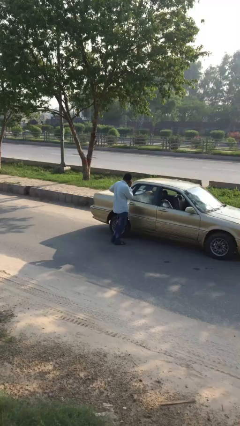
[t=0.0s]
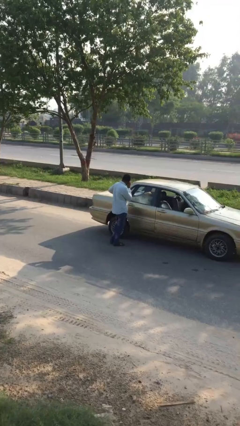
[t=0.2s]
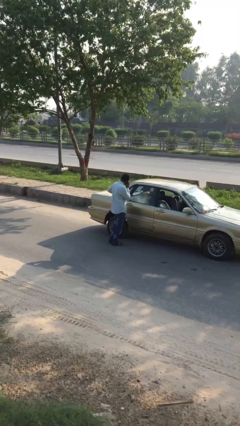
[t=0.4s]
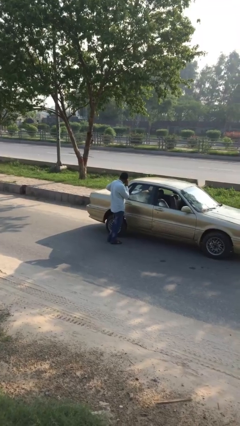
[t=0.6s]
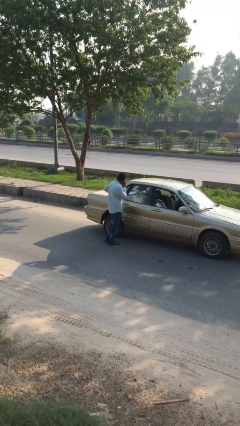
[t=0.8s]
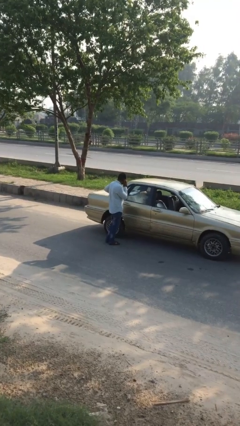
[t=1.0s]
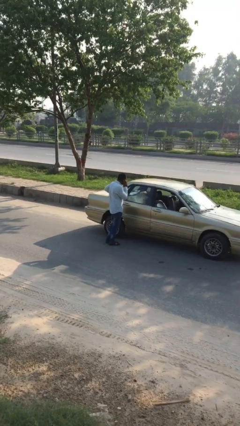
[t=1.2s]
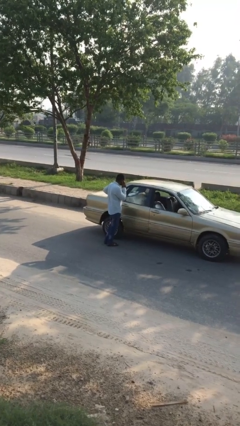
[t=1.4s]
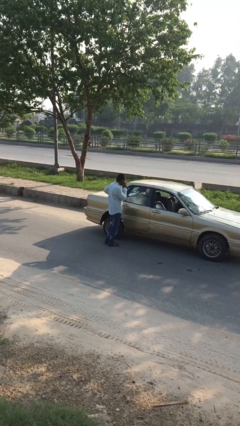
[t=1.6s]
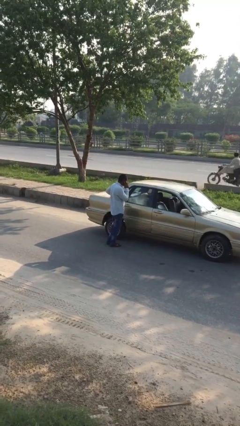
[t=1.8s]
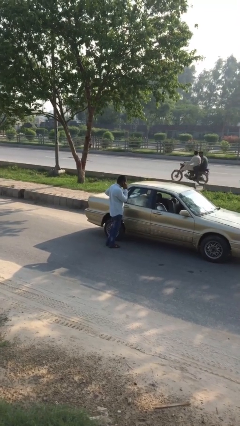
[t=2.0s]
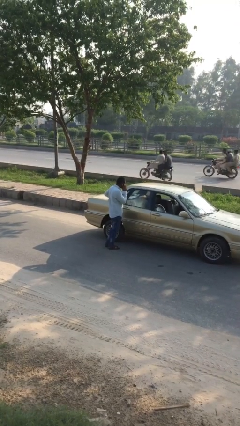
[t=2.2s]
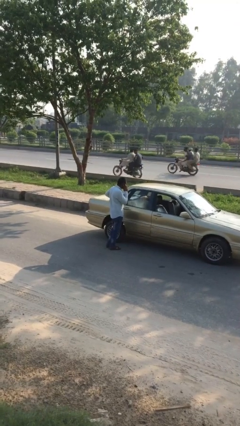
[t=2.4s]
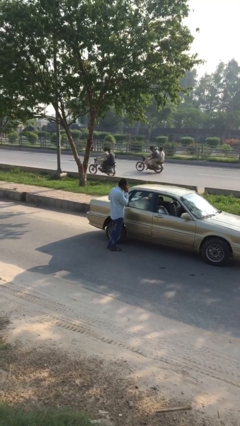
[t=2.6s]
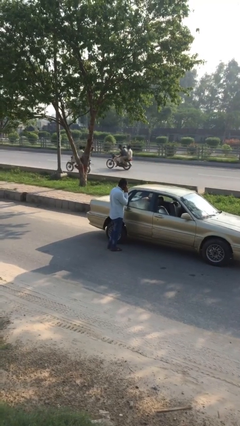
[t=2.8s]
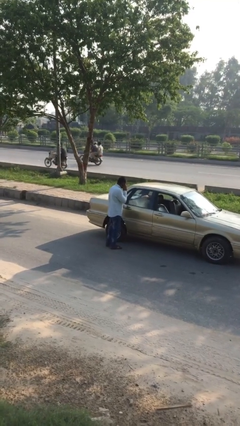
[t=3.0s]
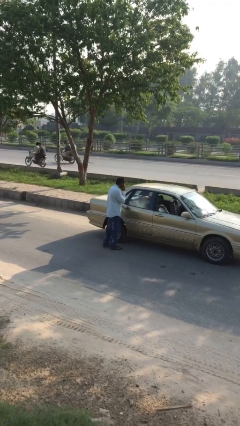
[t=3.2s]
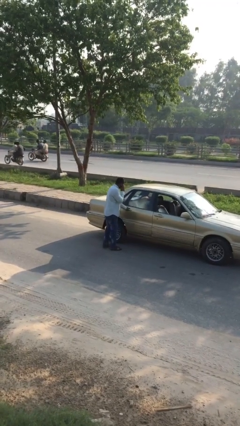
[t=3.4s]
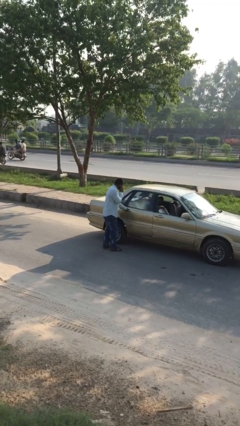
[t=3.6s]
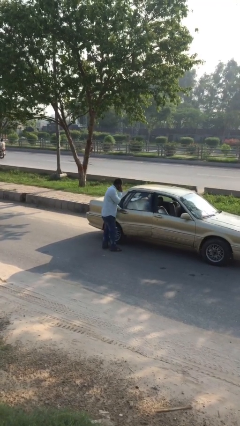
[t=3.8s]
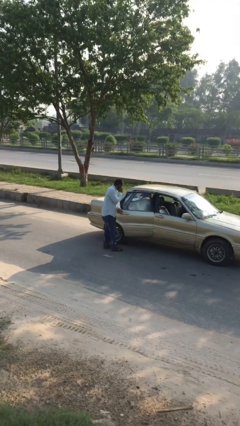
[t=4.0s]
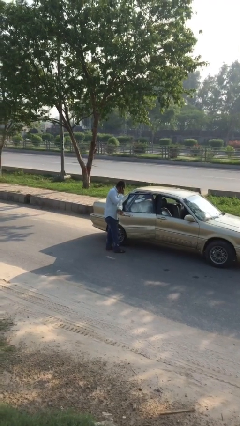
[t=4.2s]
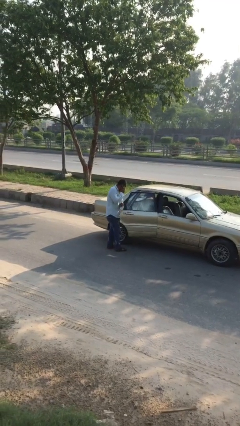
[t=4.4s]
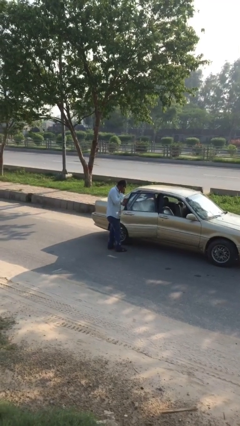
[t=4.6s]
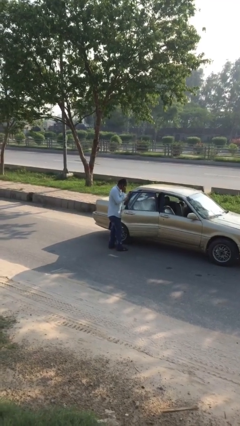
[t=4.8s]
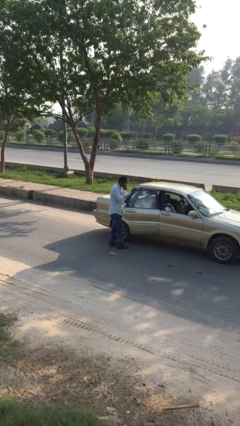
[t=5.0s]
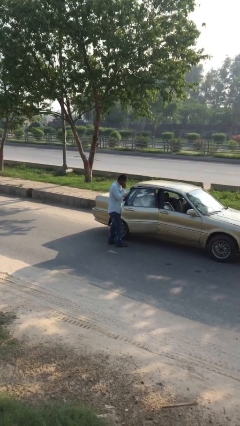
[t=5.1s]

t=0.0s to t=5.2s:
person opens car door

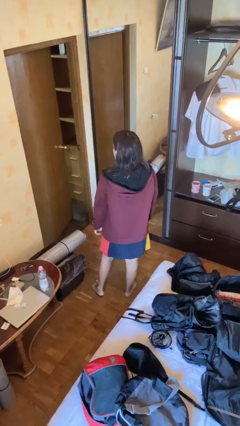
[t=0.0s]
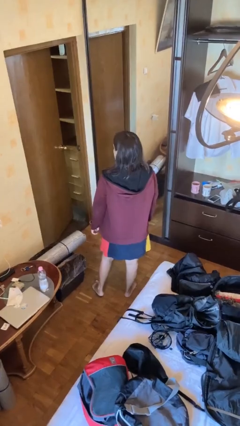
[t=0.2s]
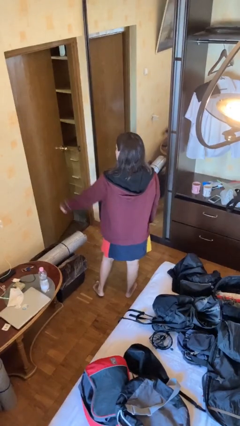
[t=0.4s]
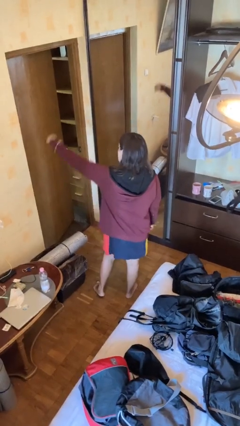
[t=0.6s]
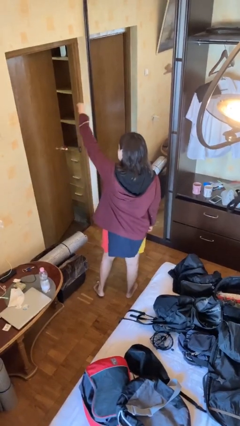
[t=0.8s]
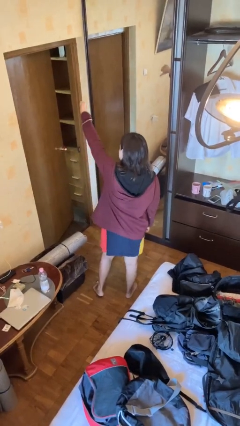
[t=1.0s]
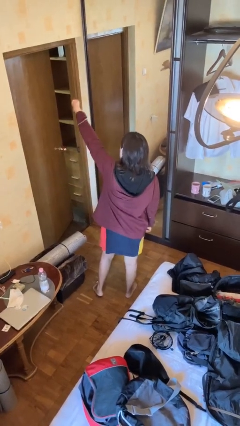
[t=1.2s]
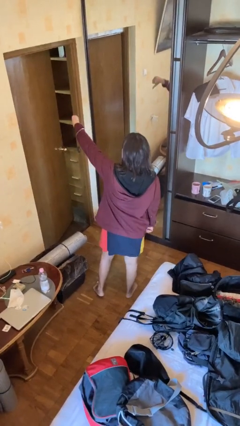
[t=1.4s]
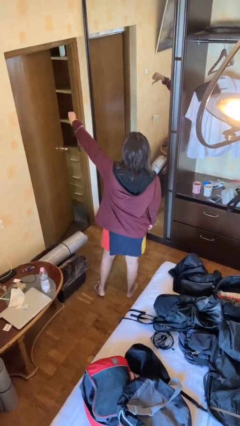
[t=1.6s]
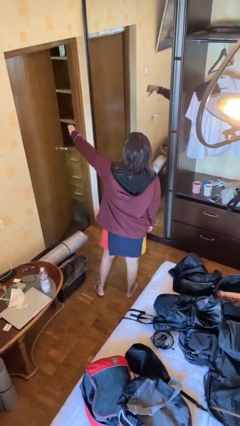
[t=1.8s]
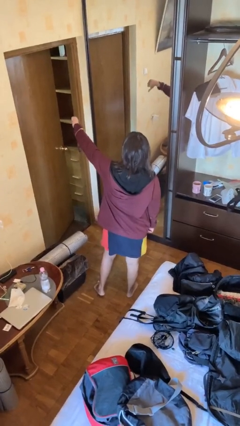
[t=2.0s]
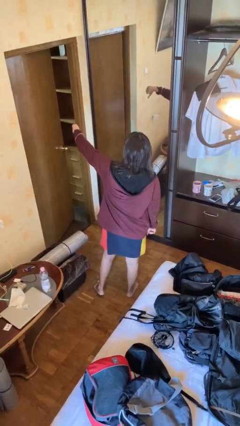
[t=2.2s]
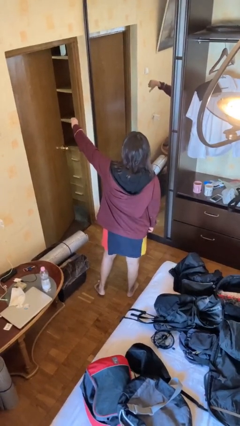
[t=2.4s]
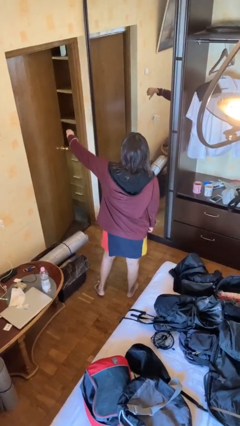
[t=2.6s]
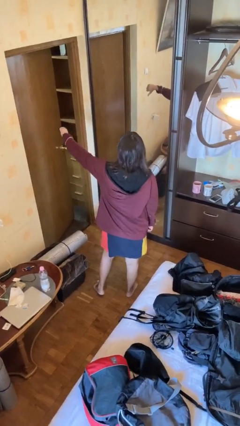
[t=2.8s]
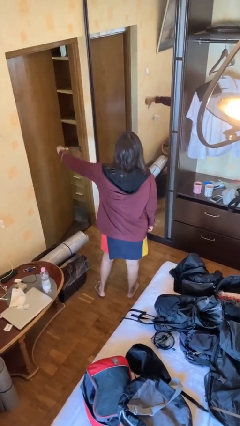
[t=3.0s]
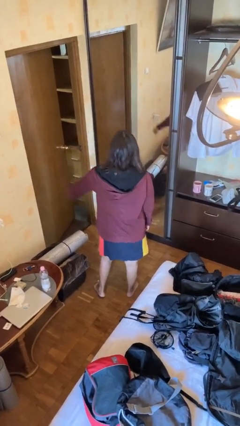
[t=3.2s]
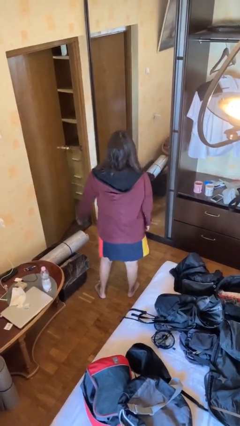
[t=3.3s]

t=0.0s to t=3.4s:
person gestures thumbs down

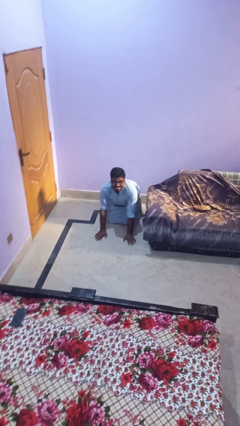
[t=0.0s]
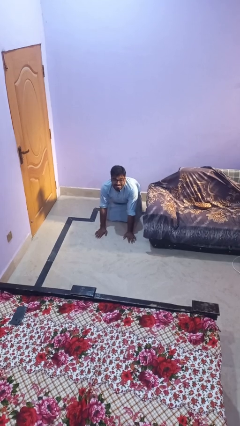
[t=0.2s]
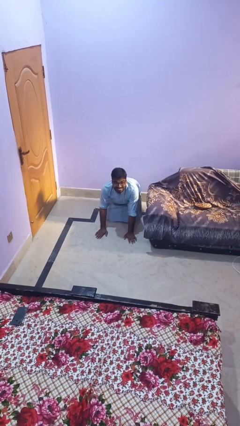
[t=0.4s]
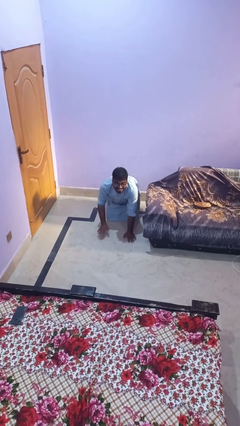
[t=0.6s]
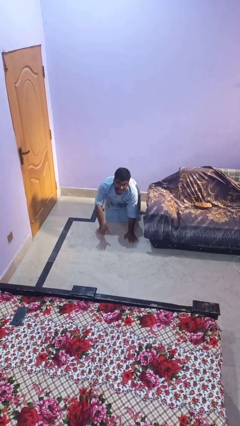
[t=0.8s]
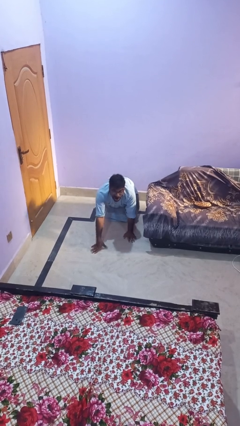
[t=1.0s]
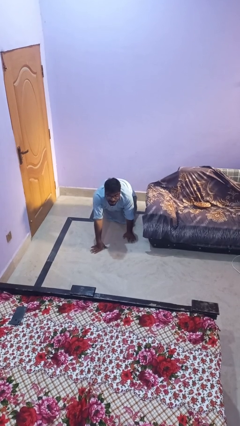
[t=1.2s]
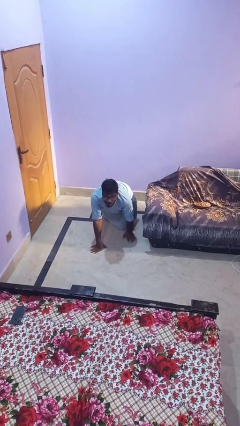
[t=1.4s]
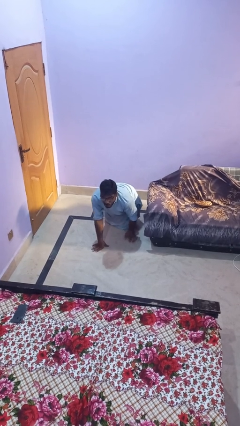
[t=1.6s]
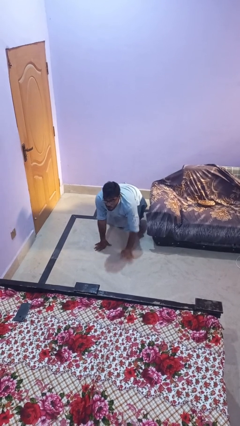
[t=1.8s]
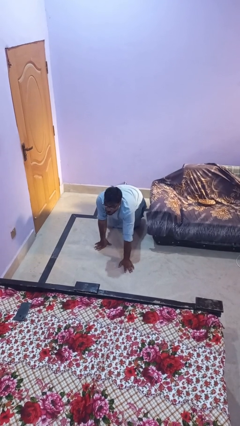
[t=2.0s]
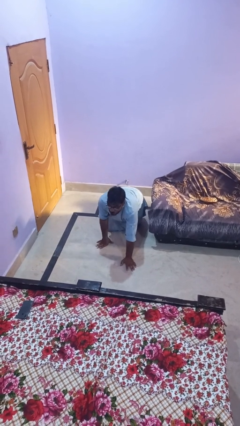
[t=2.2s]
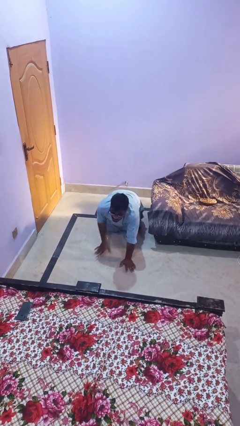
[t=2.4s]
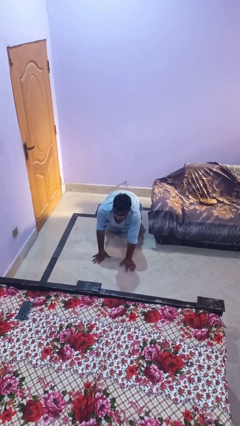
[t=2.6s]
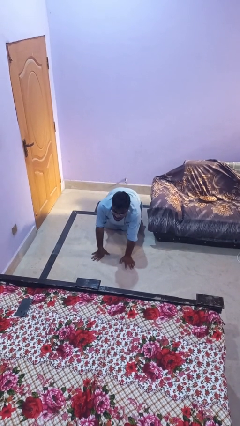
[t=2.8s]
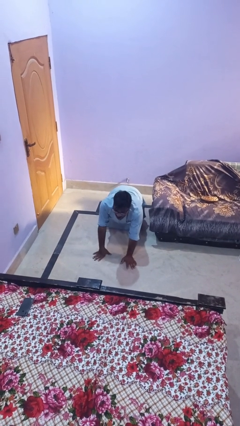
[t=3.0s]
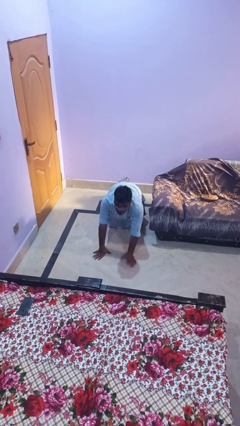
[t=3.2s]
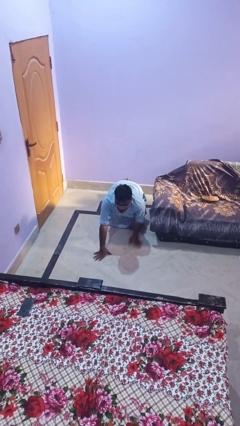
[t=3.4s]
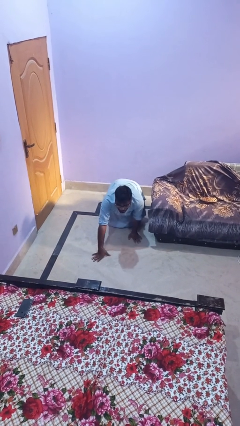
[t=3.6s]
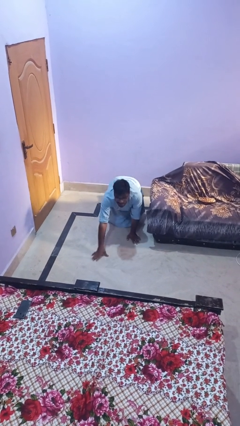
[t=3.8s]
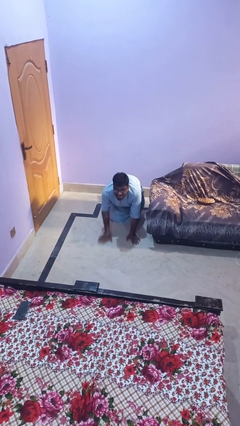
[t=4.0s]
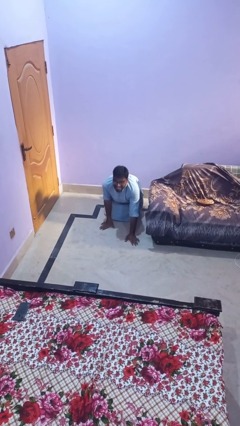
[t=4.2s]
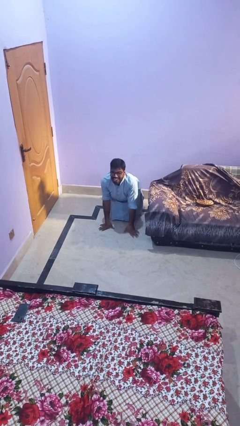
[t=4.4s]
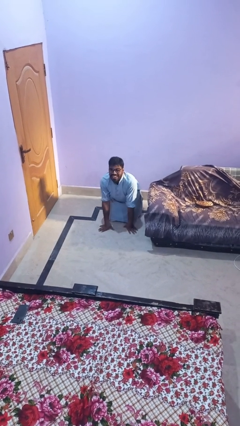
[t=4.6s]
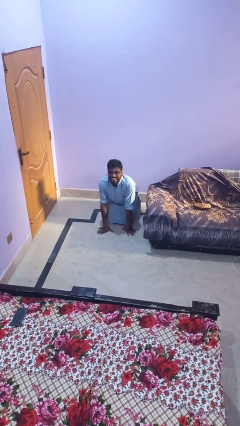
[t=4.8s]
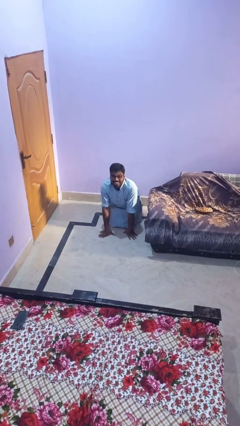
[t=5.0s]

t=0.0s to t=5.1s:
person crawls

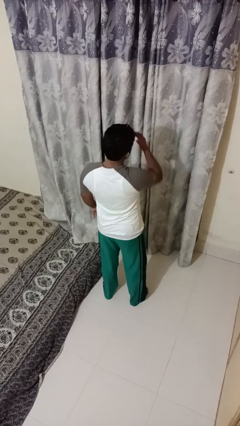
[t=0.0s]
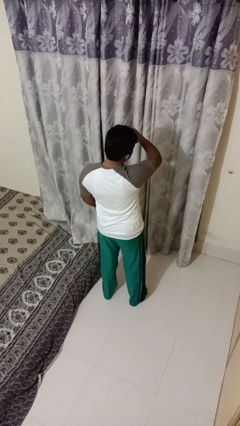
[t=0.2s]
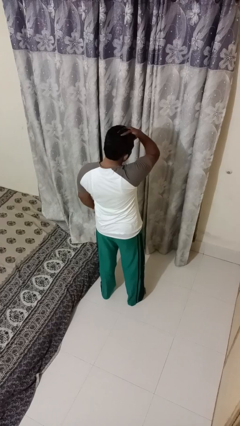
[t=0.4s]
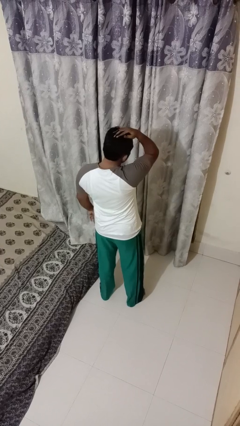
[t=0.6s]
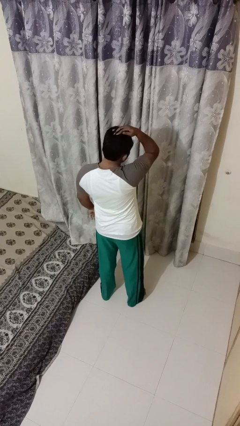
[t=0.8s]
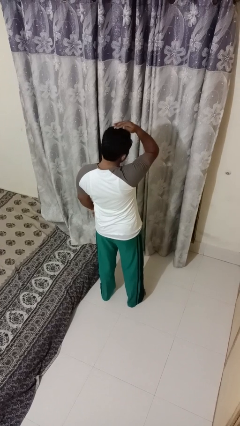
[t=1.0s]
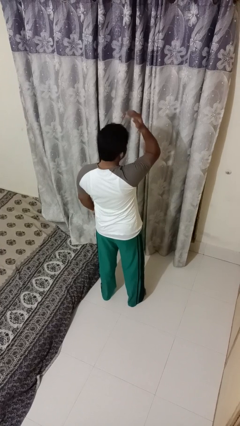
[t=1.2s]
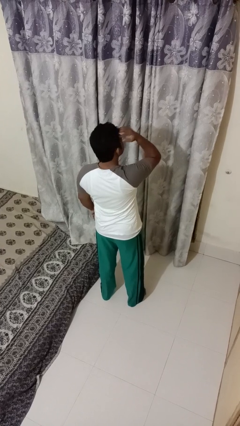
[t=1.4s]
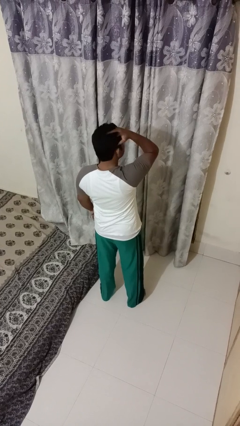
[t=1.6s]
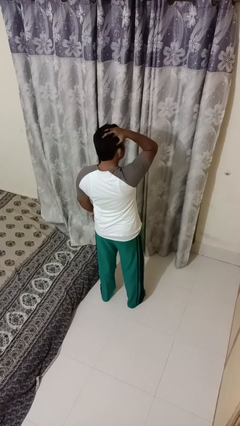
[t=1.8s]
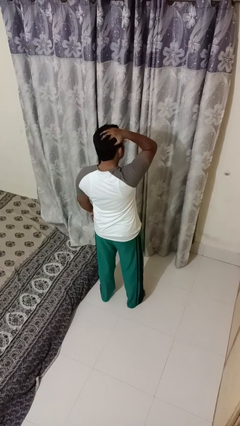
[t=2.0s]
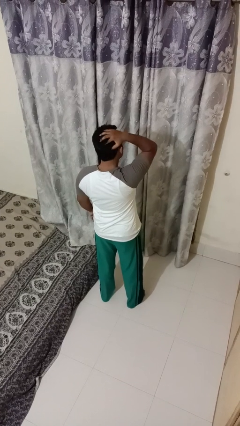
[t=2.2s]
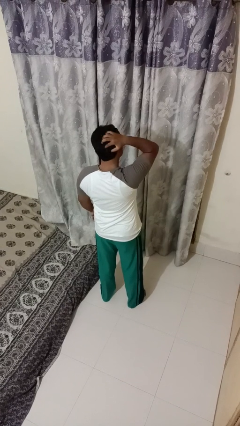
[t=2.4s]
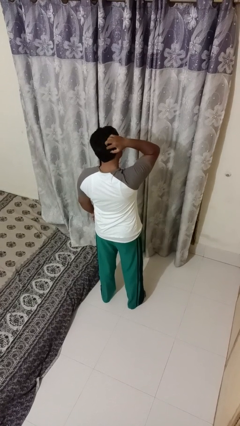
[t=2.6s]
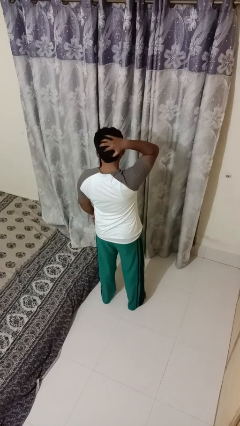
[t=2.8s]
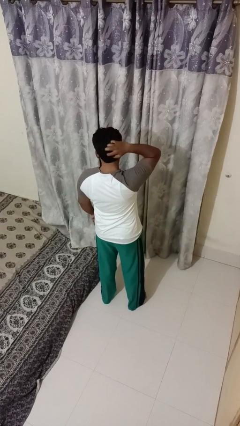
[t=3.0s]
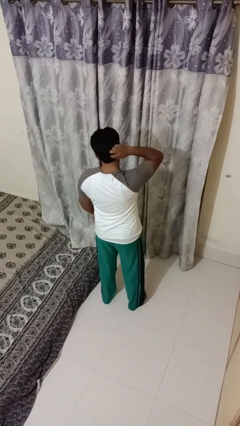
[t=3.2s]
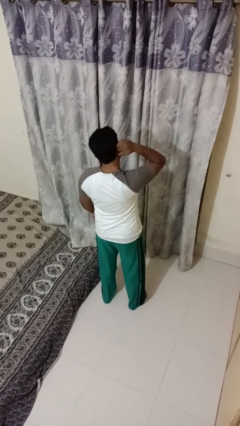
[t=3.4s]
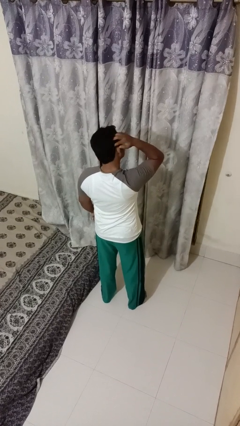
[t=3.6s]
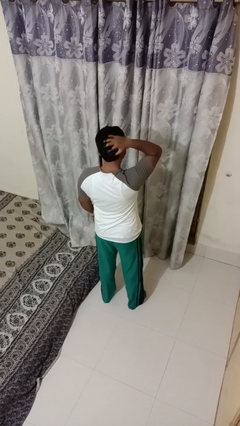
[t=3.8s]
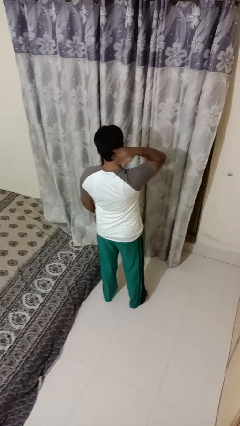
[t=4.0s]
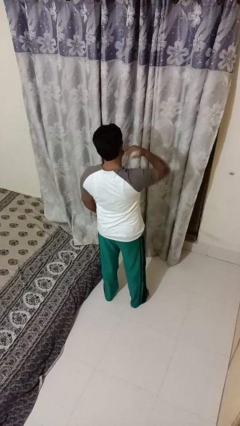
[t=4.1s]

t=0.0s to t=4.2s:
person strokes hair

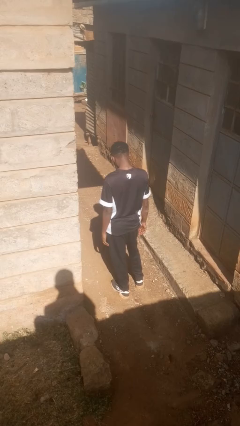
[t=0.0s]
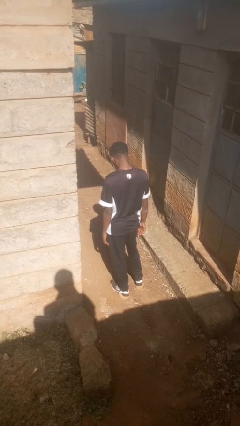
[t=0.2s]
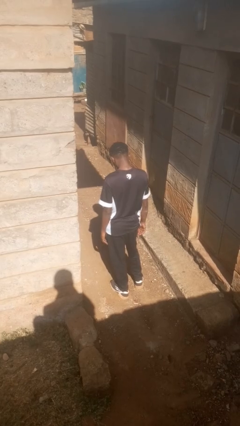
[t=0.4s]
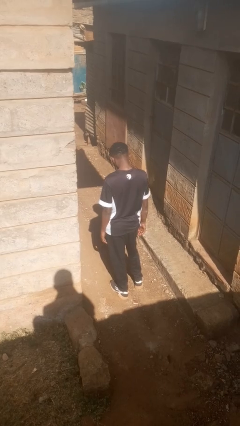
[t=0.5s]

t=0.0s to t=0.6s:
person gestures number five
